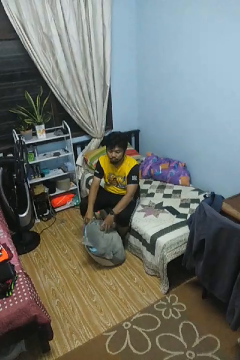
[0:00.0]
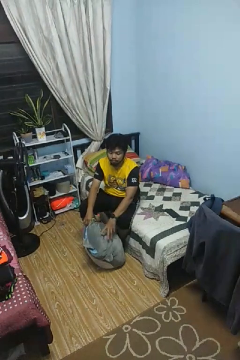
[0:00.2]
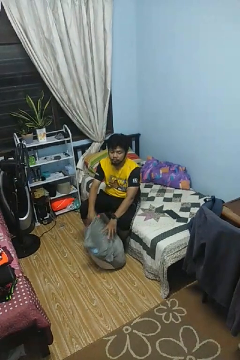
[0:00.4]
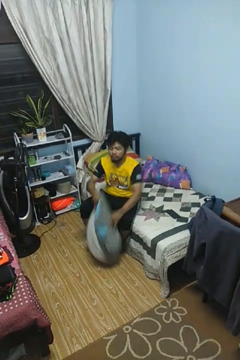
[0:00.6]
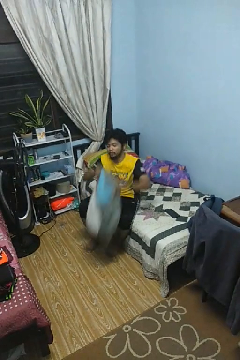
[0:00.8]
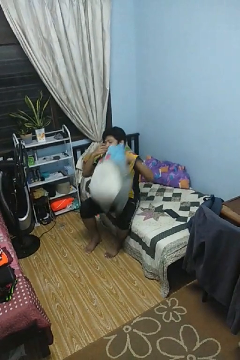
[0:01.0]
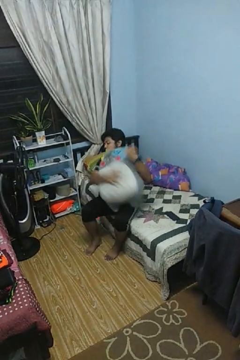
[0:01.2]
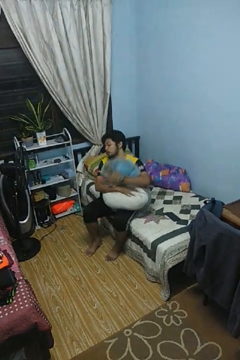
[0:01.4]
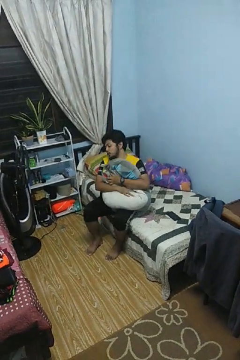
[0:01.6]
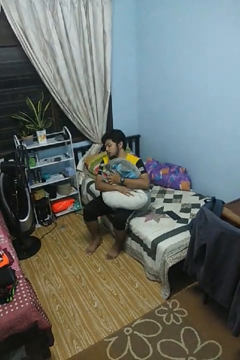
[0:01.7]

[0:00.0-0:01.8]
person hugs stuffed animal

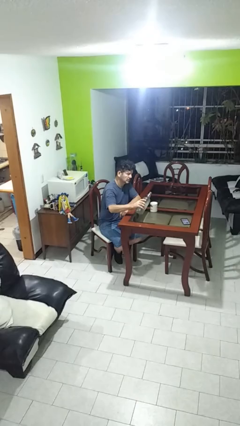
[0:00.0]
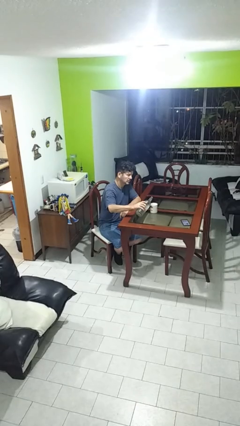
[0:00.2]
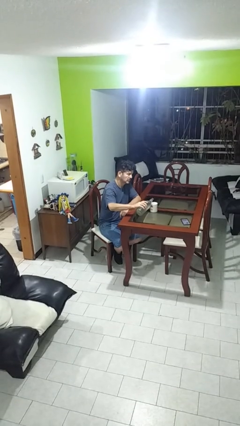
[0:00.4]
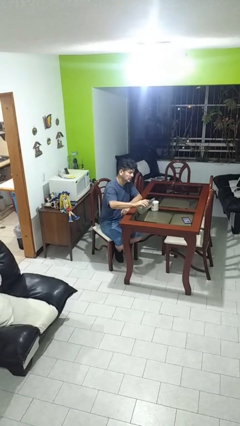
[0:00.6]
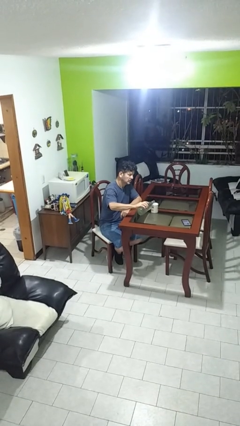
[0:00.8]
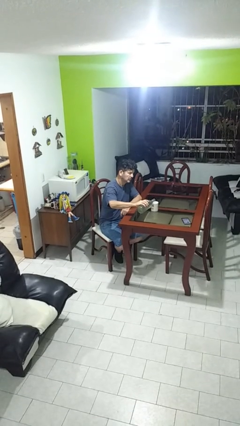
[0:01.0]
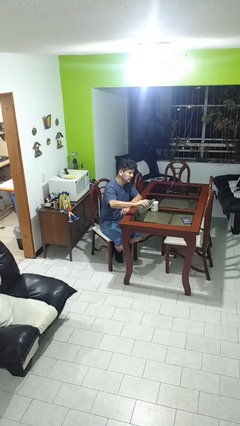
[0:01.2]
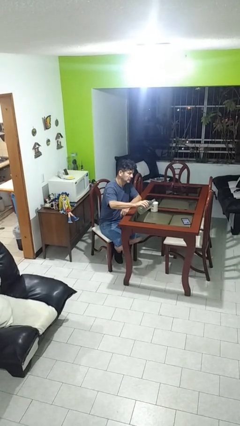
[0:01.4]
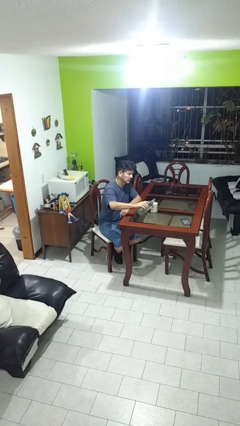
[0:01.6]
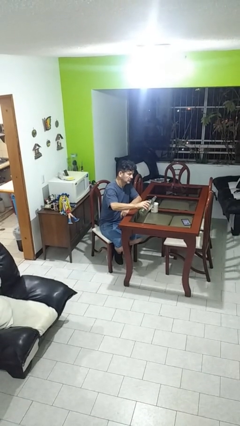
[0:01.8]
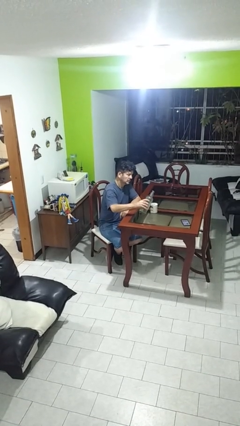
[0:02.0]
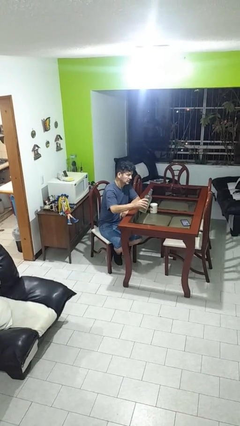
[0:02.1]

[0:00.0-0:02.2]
person pours liquid into cup

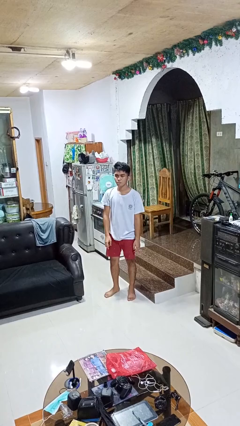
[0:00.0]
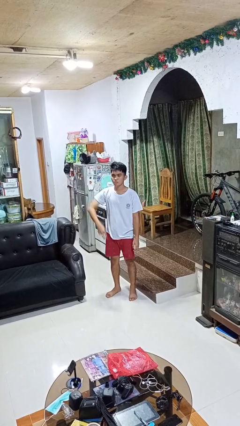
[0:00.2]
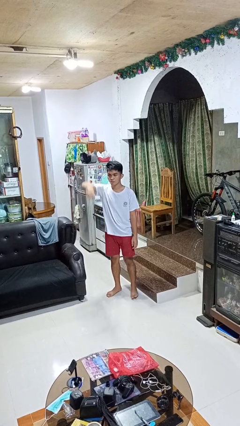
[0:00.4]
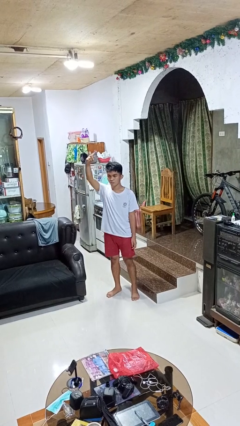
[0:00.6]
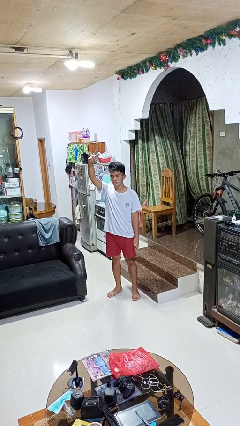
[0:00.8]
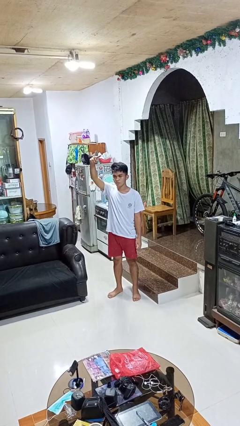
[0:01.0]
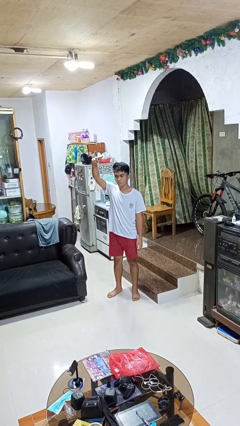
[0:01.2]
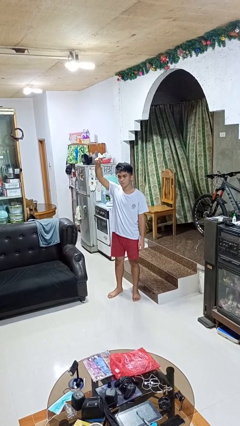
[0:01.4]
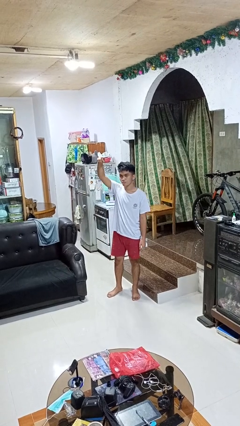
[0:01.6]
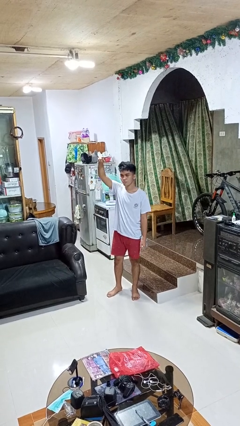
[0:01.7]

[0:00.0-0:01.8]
person gestures swipe up

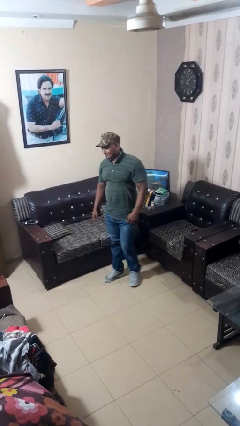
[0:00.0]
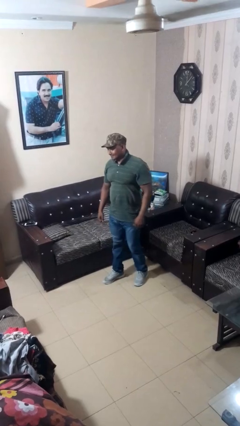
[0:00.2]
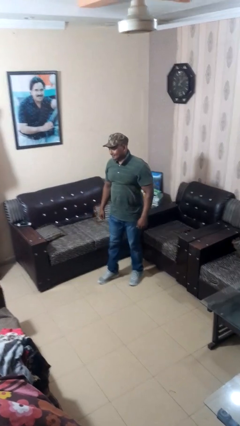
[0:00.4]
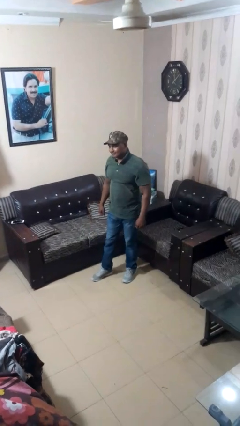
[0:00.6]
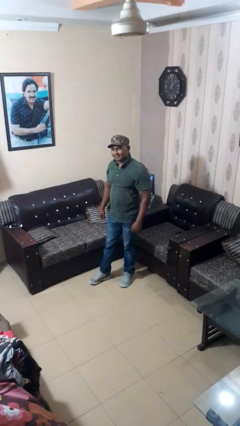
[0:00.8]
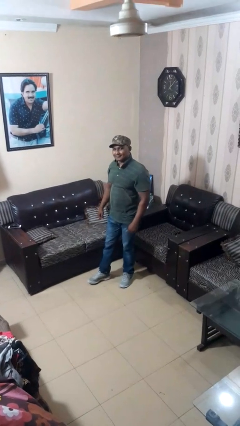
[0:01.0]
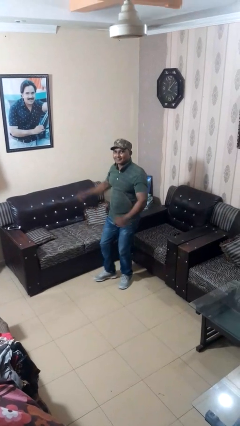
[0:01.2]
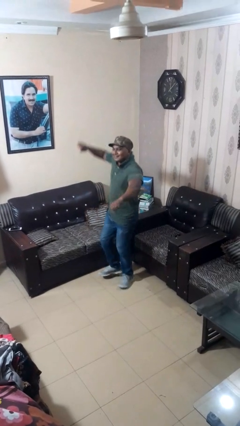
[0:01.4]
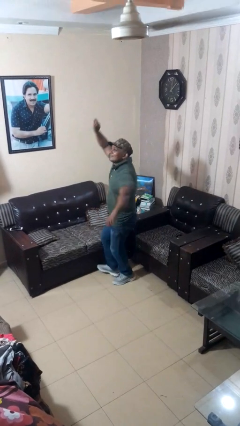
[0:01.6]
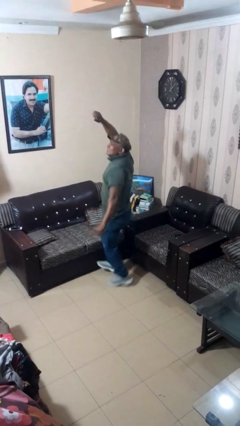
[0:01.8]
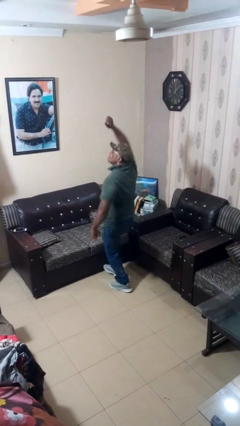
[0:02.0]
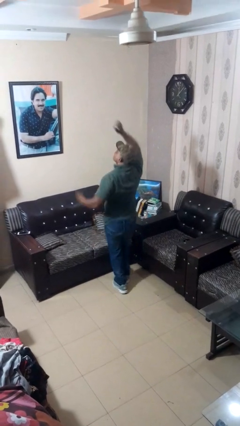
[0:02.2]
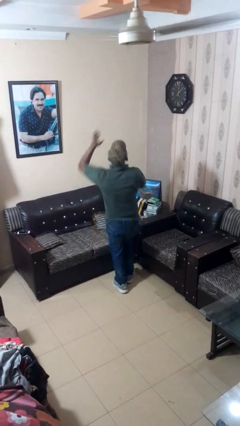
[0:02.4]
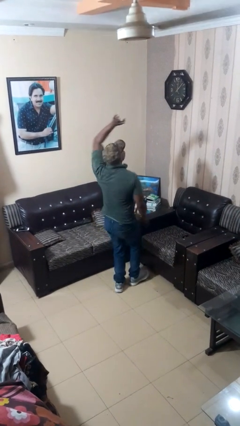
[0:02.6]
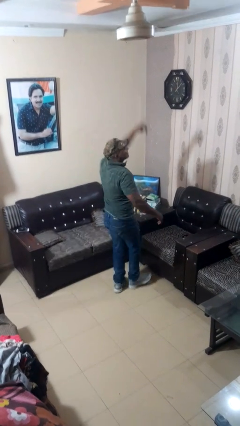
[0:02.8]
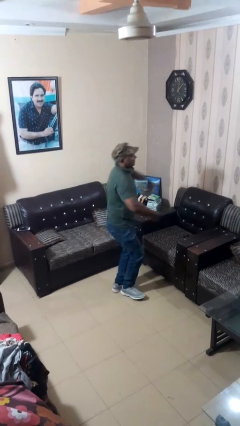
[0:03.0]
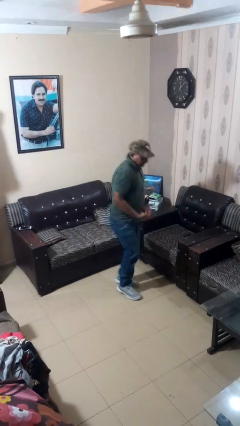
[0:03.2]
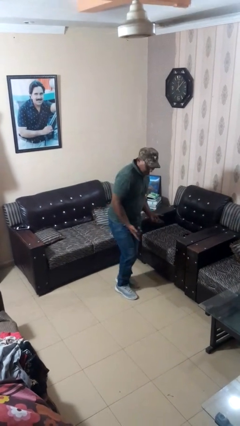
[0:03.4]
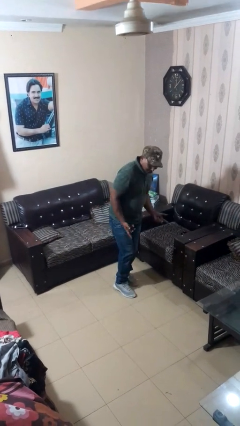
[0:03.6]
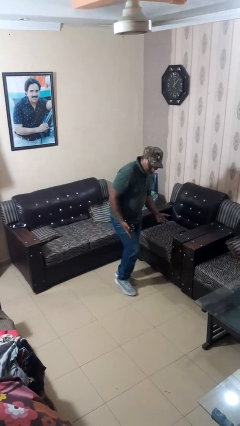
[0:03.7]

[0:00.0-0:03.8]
person dances in place

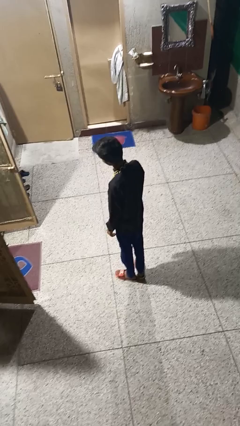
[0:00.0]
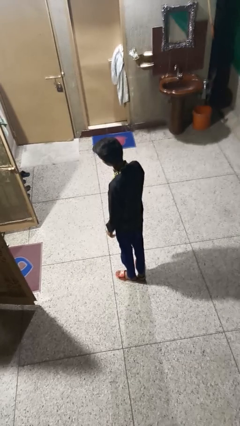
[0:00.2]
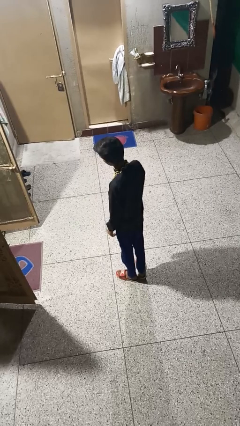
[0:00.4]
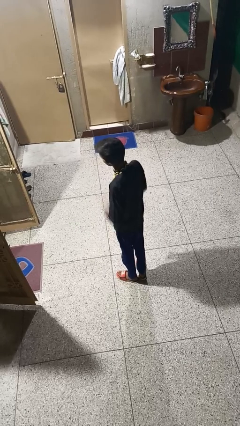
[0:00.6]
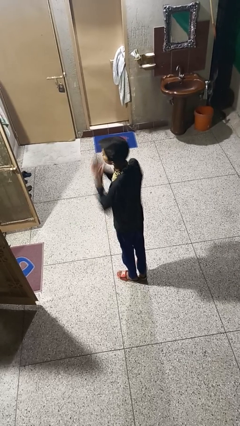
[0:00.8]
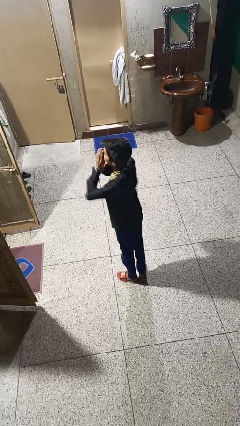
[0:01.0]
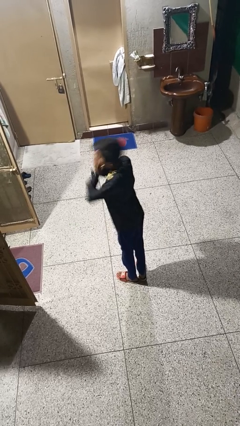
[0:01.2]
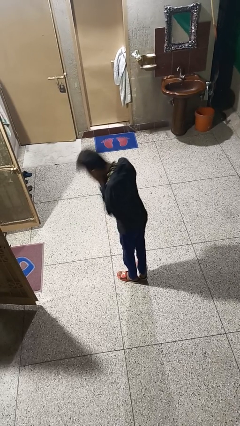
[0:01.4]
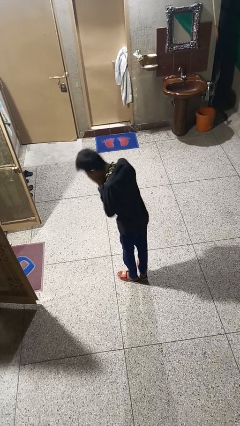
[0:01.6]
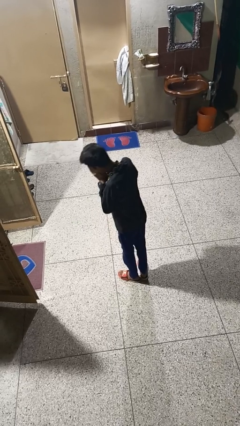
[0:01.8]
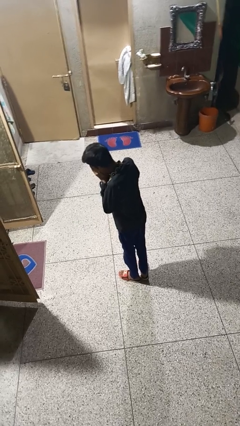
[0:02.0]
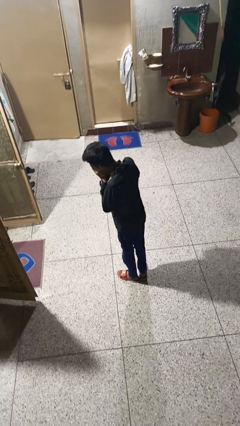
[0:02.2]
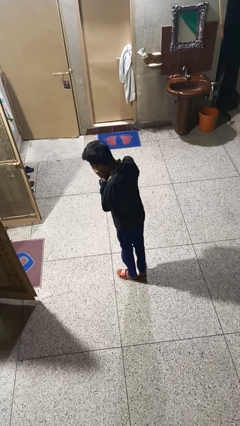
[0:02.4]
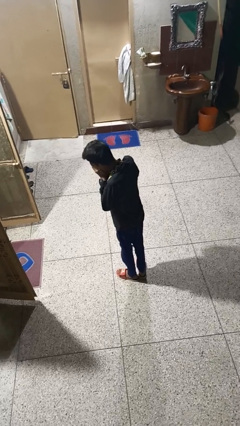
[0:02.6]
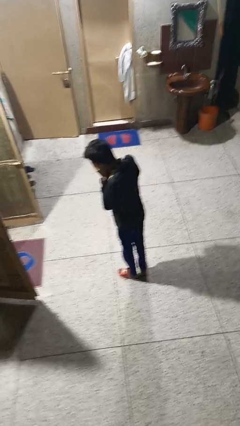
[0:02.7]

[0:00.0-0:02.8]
person sneezes into hand

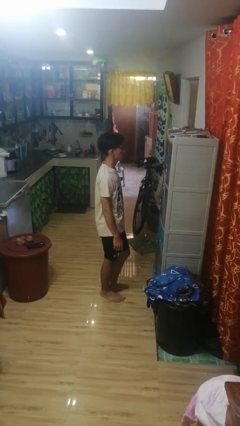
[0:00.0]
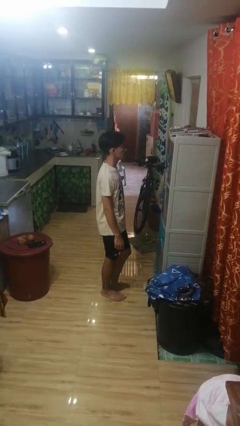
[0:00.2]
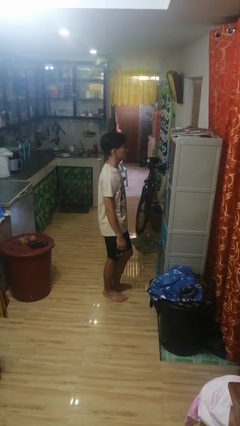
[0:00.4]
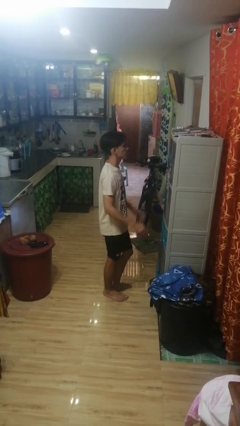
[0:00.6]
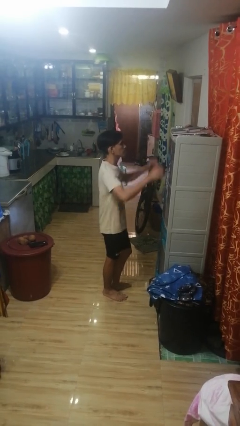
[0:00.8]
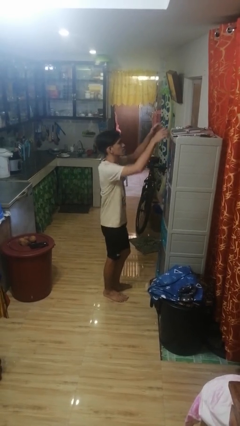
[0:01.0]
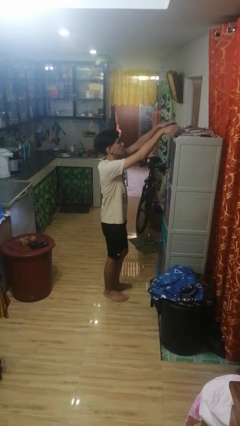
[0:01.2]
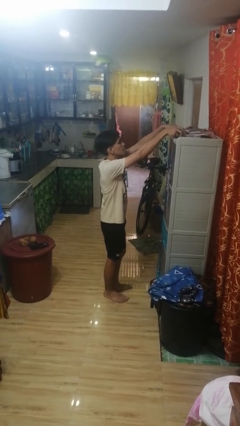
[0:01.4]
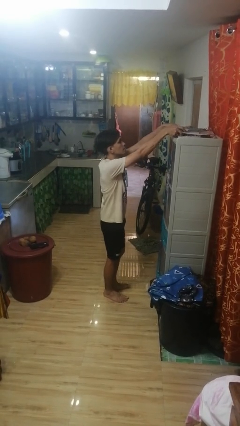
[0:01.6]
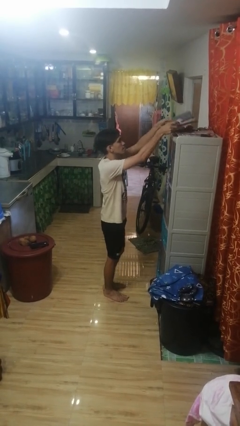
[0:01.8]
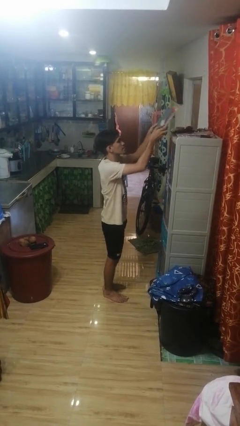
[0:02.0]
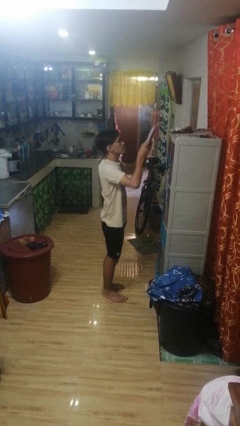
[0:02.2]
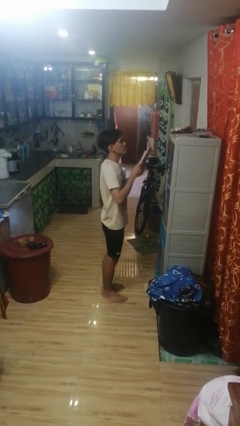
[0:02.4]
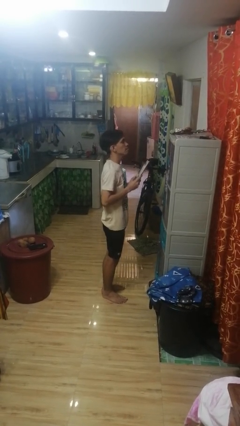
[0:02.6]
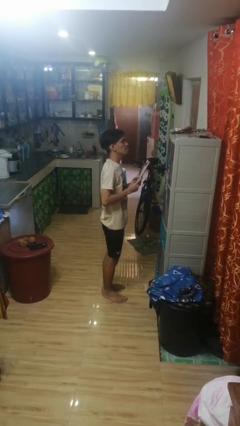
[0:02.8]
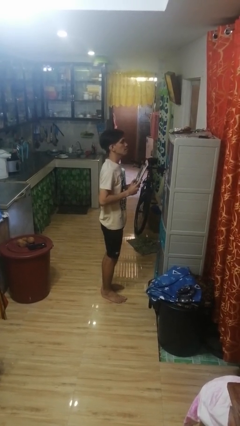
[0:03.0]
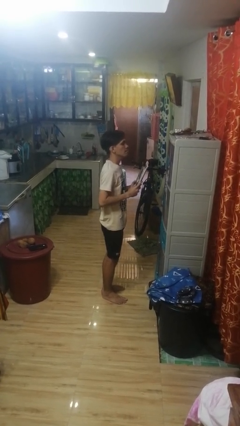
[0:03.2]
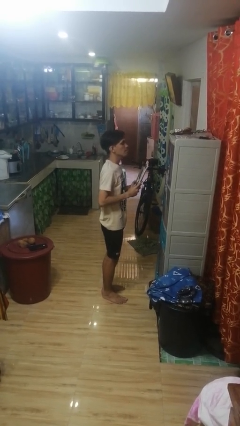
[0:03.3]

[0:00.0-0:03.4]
person picks up object from shelf

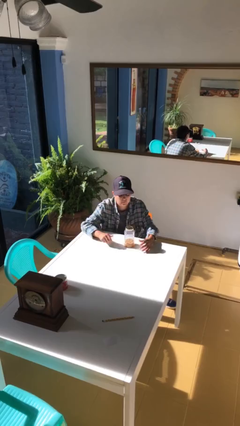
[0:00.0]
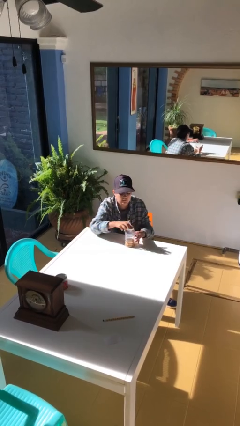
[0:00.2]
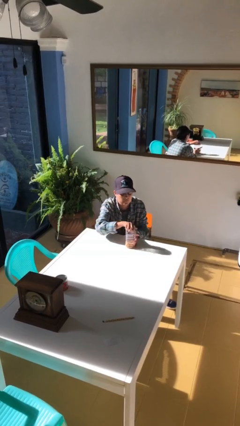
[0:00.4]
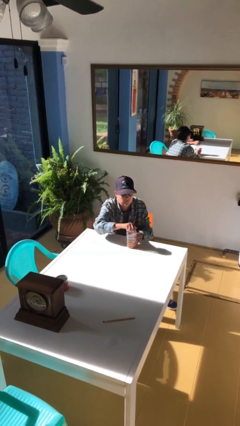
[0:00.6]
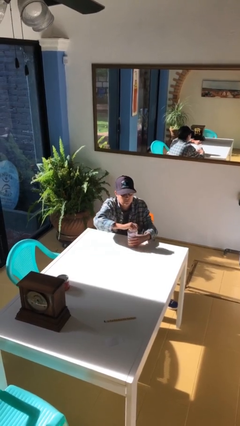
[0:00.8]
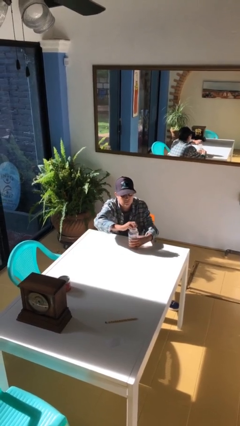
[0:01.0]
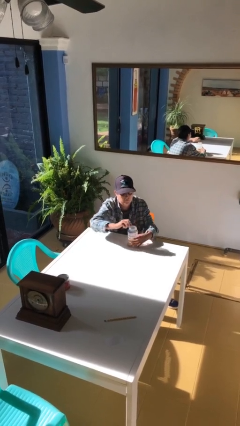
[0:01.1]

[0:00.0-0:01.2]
person opens jar

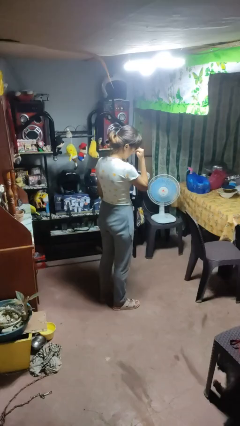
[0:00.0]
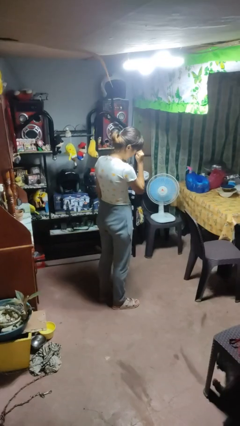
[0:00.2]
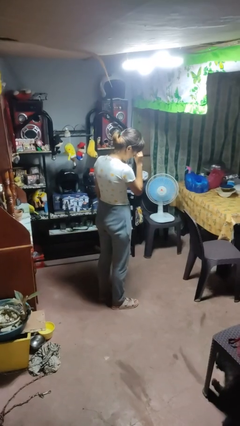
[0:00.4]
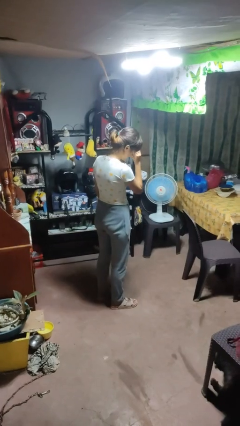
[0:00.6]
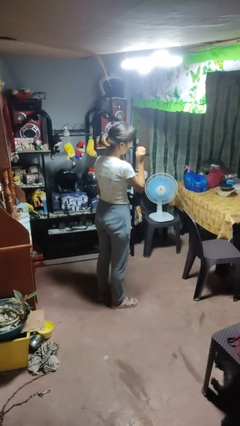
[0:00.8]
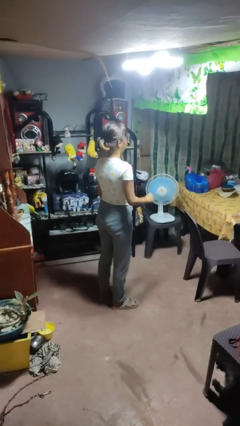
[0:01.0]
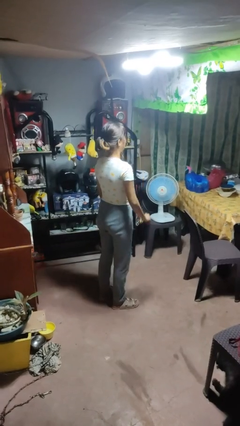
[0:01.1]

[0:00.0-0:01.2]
person rubs eyes
